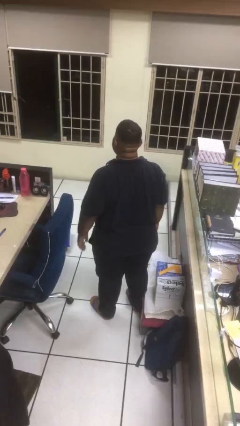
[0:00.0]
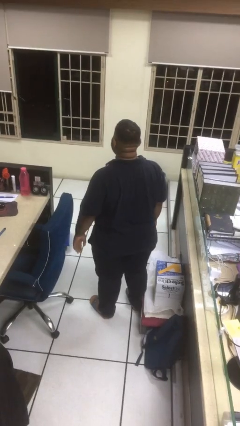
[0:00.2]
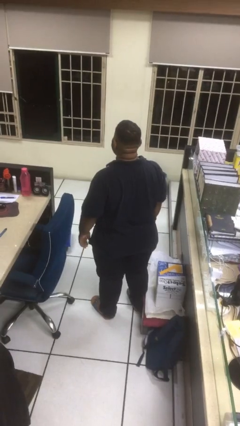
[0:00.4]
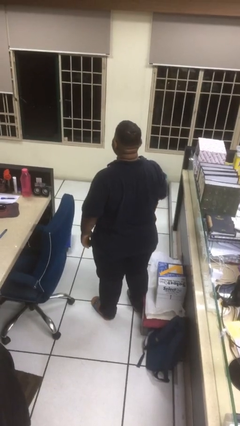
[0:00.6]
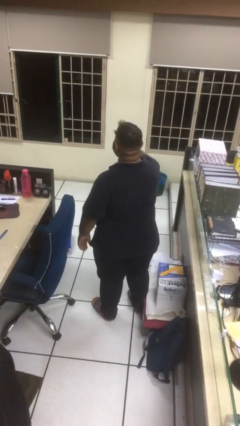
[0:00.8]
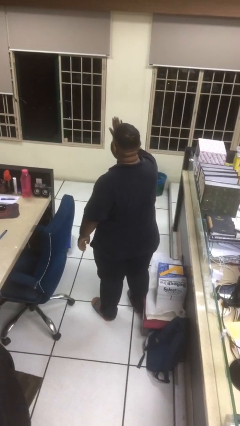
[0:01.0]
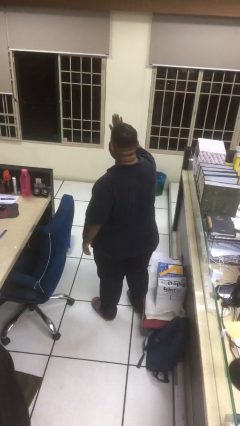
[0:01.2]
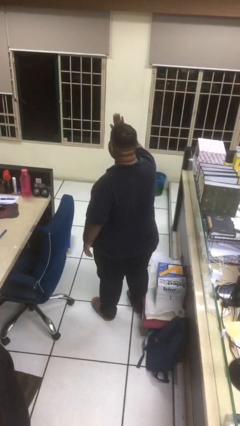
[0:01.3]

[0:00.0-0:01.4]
person gestures stop

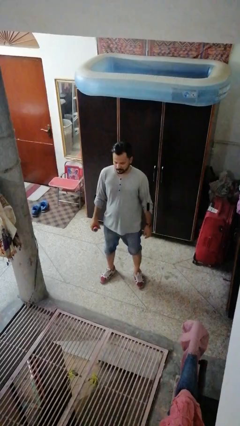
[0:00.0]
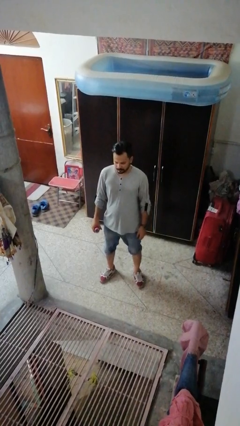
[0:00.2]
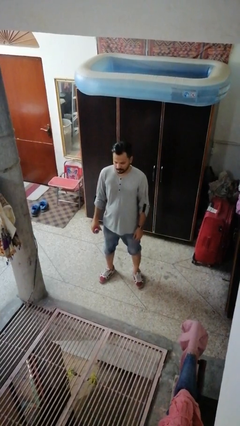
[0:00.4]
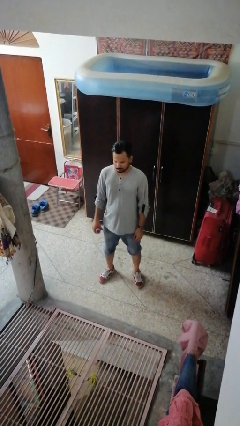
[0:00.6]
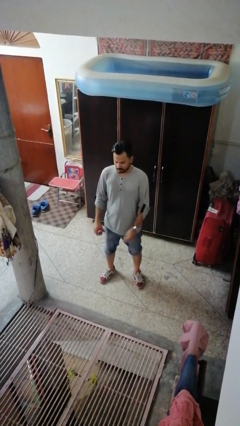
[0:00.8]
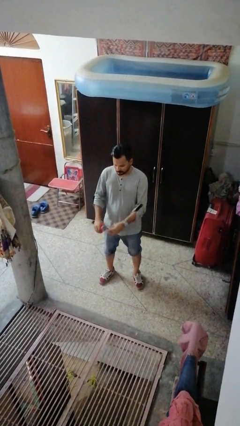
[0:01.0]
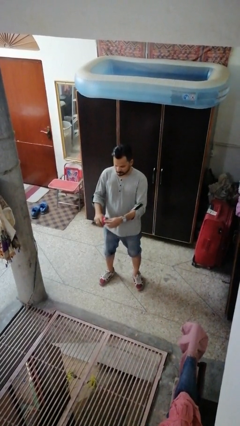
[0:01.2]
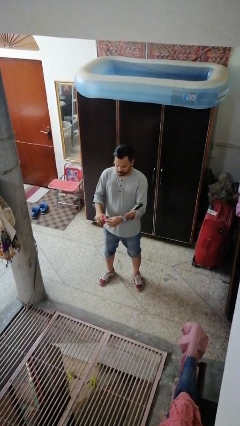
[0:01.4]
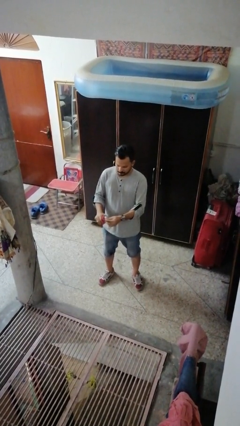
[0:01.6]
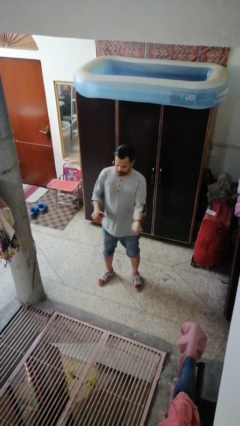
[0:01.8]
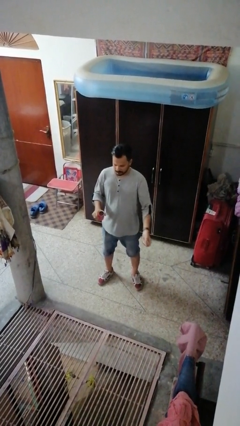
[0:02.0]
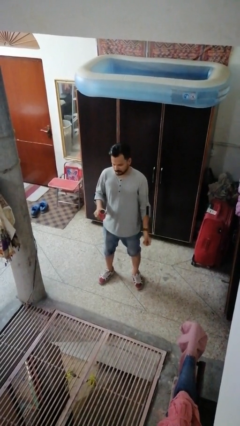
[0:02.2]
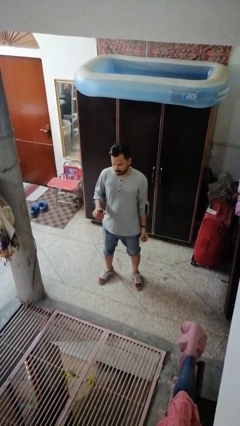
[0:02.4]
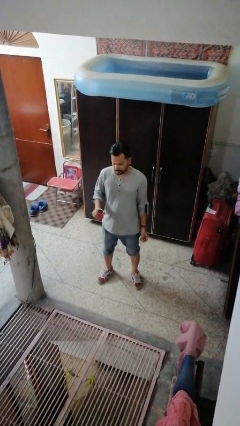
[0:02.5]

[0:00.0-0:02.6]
person opens beverage can

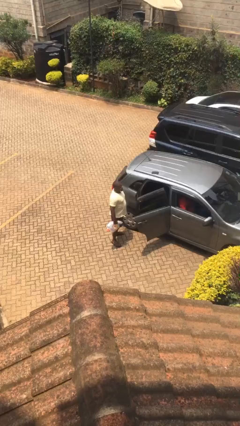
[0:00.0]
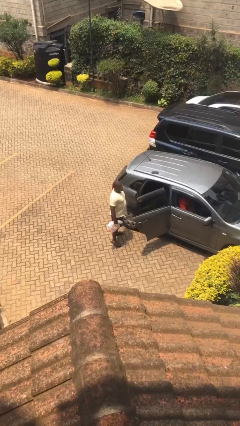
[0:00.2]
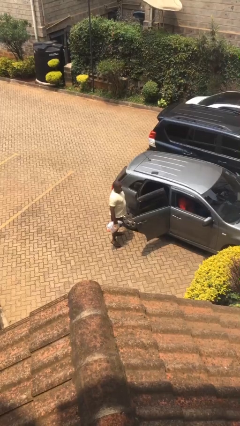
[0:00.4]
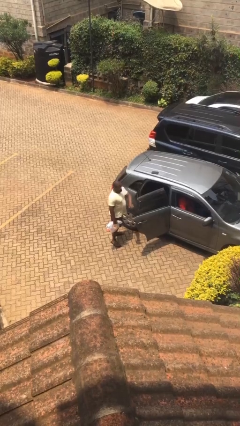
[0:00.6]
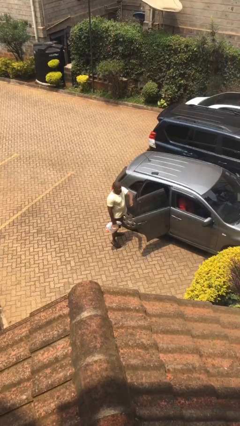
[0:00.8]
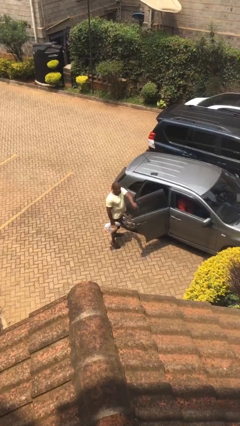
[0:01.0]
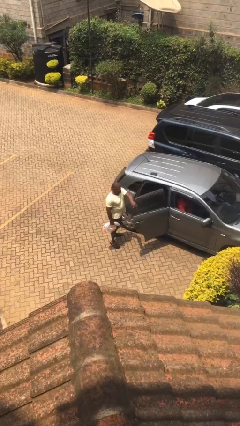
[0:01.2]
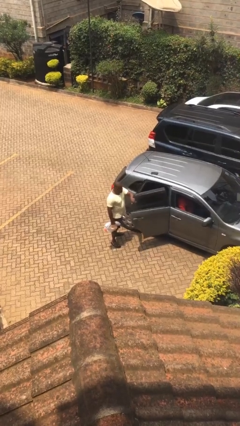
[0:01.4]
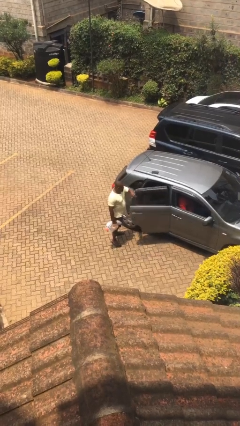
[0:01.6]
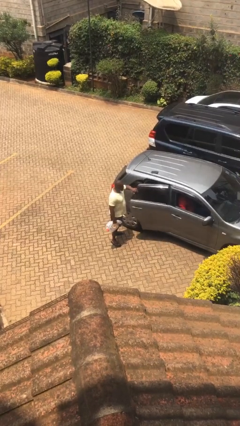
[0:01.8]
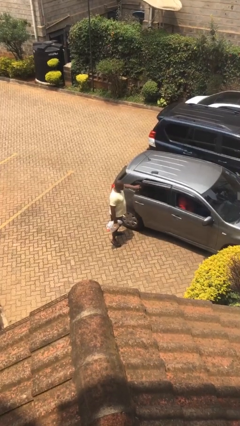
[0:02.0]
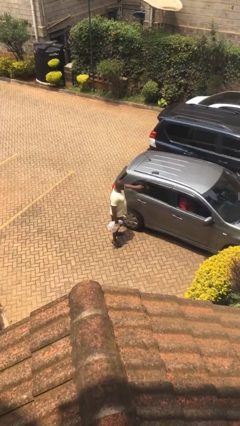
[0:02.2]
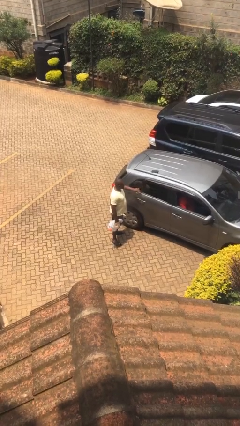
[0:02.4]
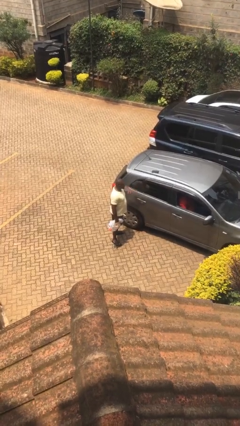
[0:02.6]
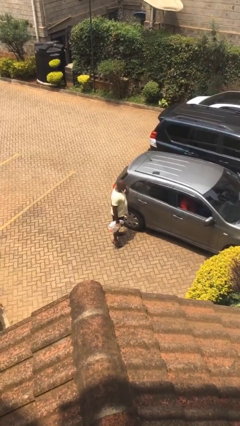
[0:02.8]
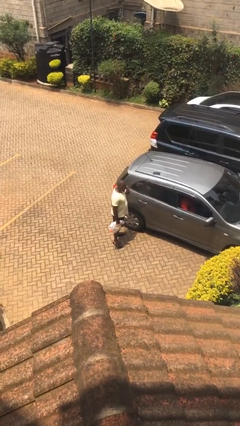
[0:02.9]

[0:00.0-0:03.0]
person closes car door

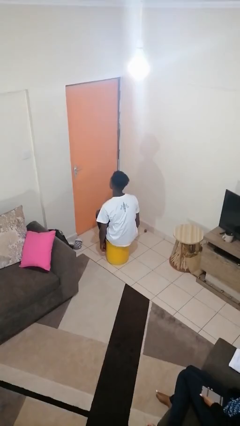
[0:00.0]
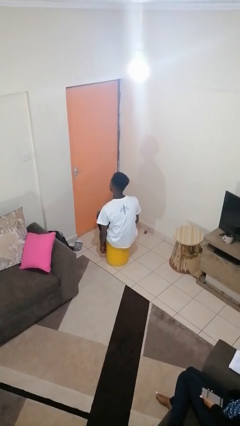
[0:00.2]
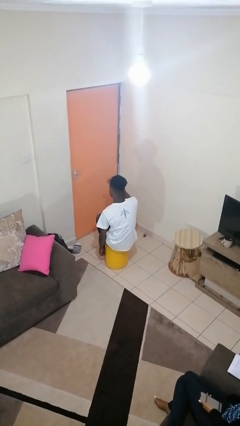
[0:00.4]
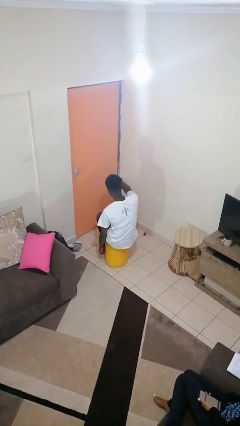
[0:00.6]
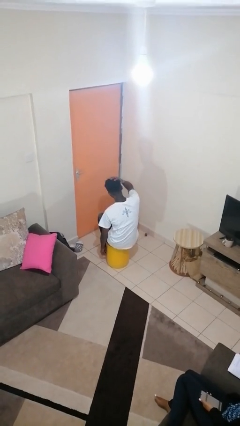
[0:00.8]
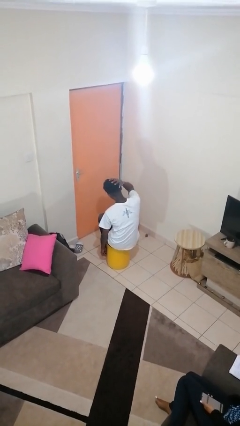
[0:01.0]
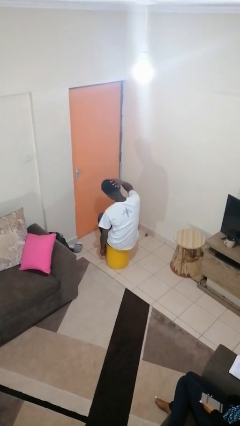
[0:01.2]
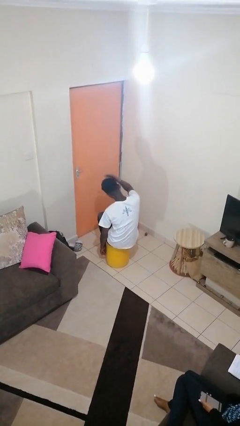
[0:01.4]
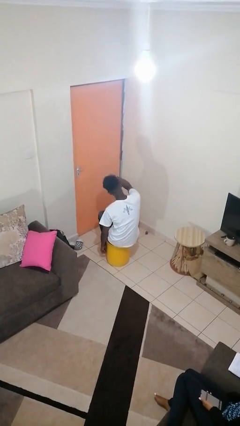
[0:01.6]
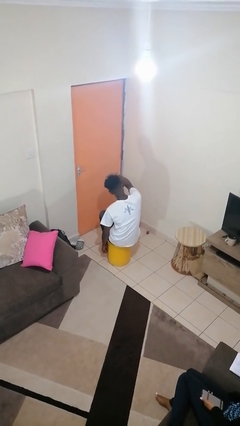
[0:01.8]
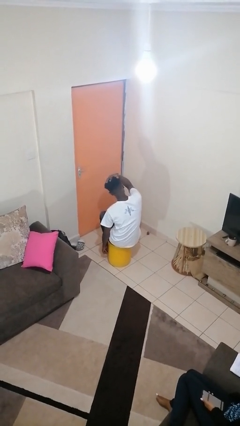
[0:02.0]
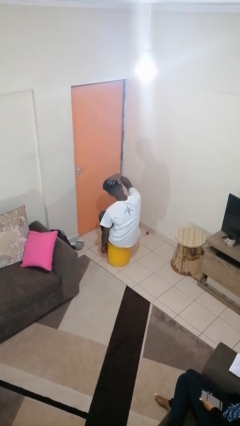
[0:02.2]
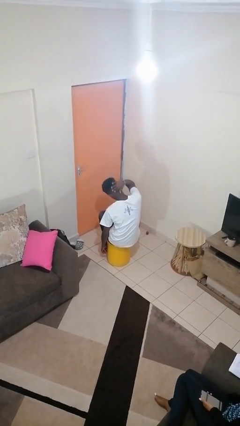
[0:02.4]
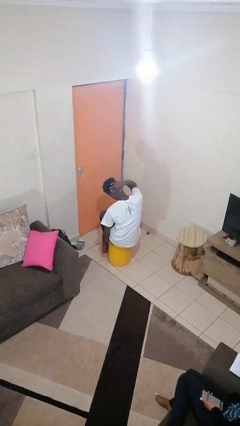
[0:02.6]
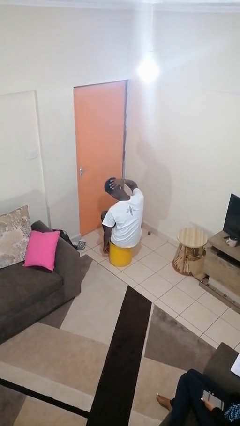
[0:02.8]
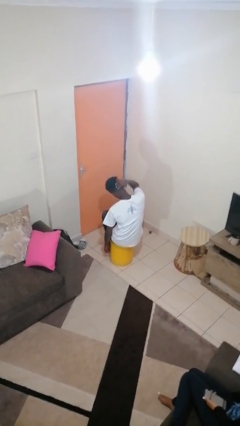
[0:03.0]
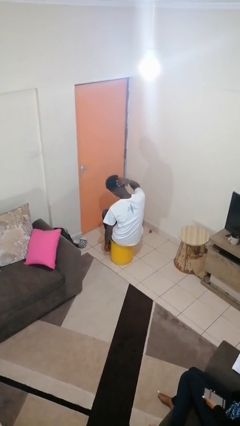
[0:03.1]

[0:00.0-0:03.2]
person strokes hair

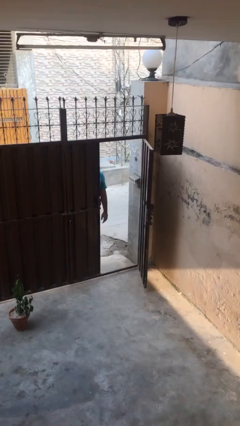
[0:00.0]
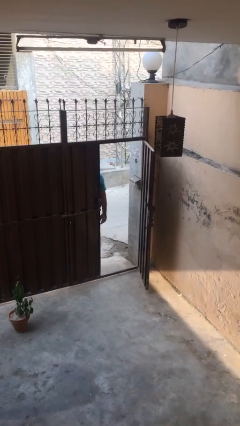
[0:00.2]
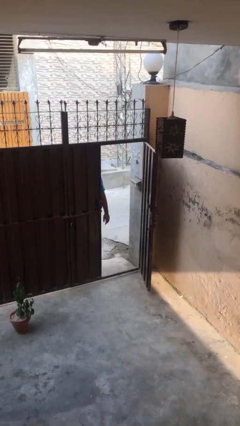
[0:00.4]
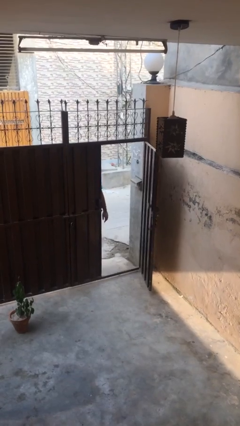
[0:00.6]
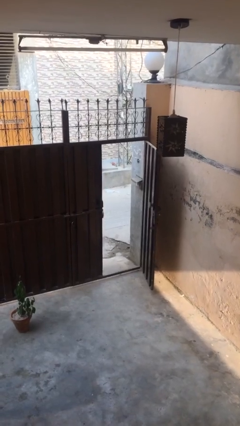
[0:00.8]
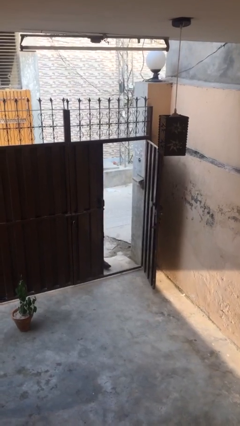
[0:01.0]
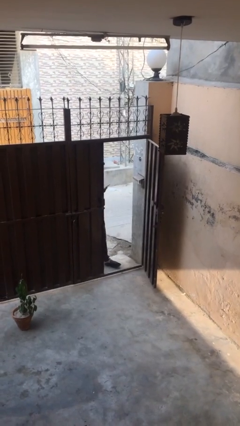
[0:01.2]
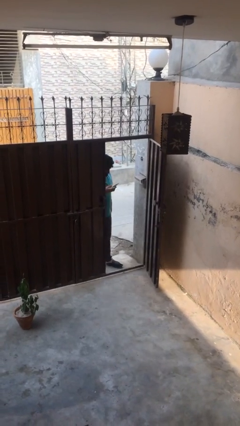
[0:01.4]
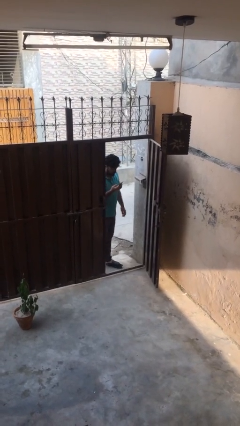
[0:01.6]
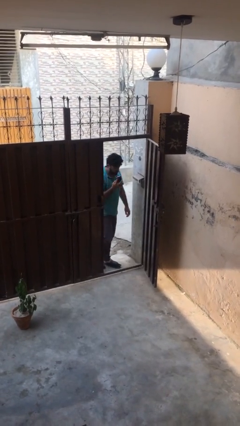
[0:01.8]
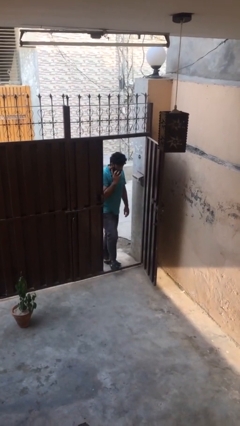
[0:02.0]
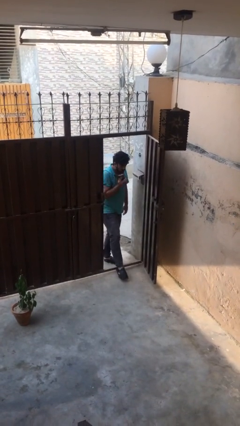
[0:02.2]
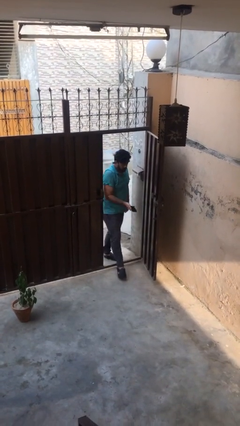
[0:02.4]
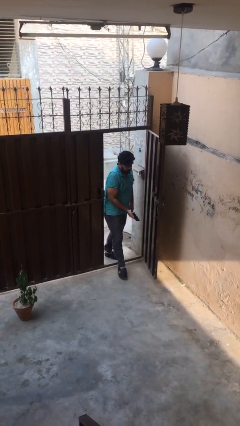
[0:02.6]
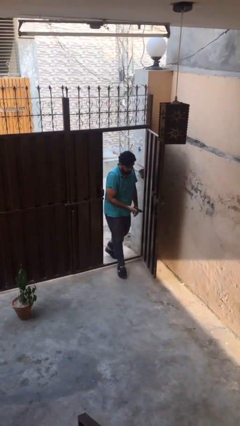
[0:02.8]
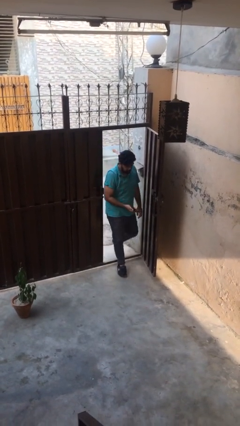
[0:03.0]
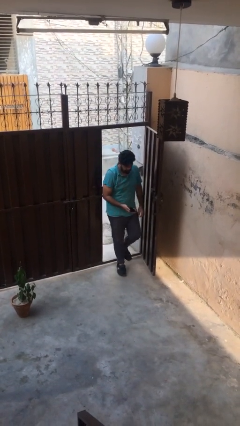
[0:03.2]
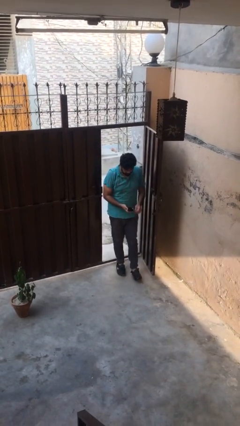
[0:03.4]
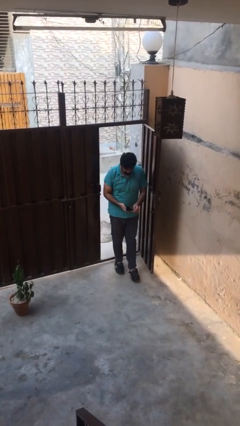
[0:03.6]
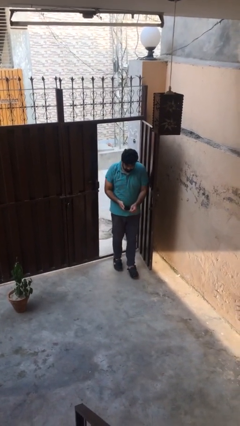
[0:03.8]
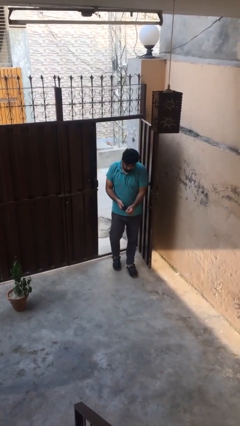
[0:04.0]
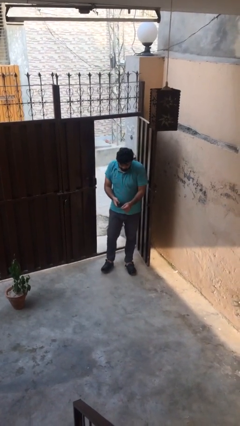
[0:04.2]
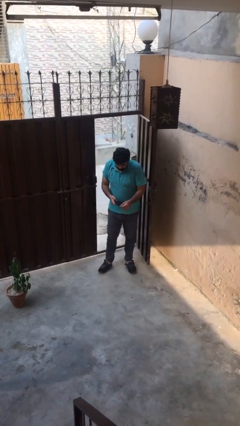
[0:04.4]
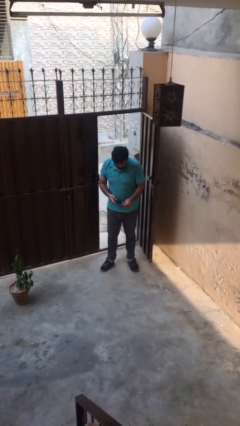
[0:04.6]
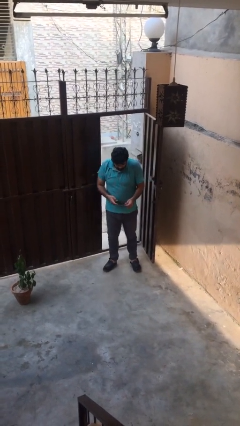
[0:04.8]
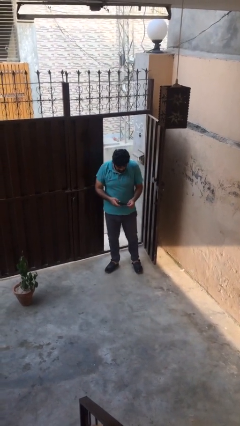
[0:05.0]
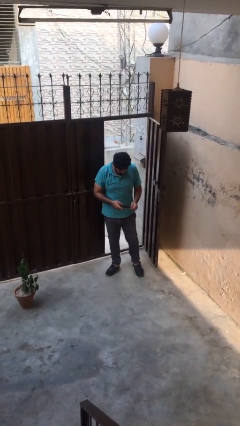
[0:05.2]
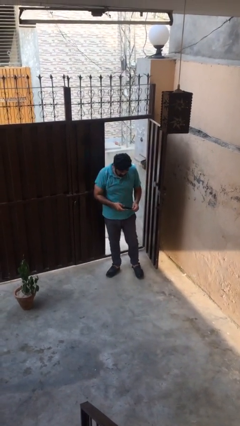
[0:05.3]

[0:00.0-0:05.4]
person enters scene through structure

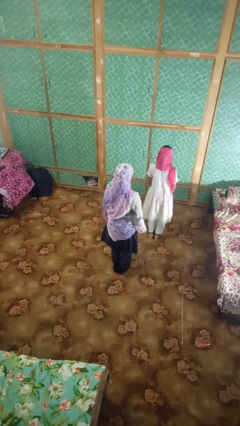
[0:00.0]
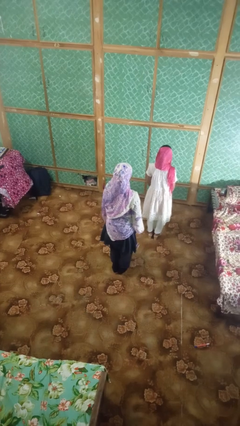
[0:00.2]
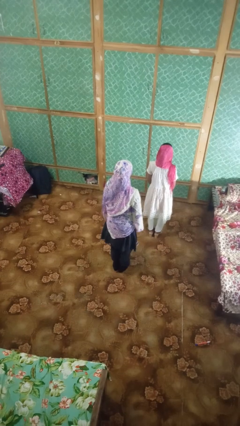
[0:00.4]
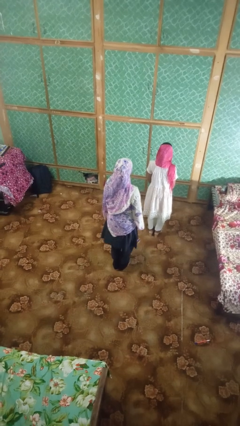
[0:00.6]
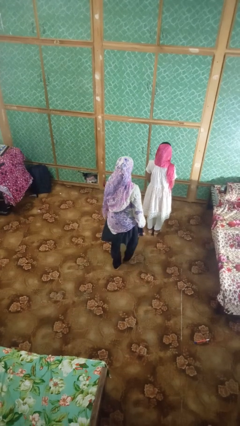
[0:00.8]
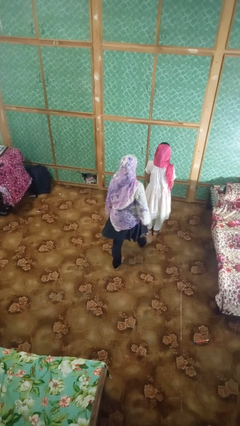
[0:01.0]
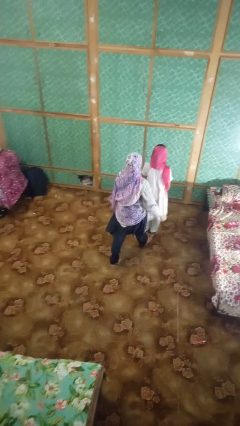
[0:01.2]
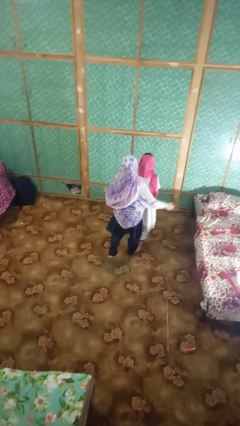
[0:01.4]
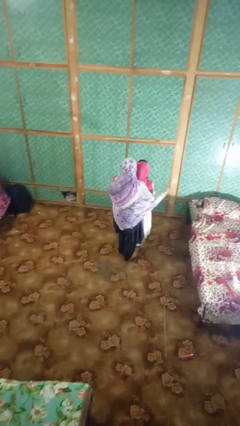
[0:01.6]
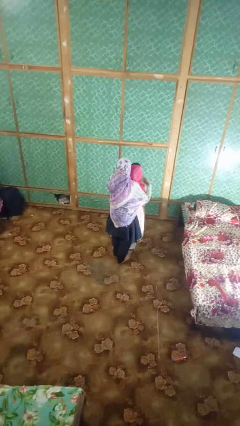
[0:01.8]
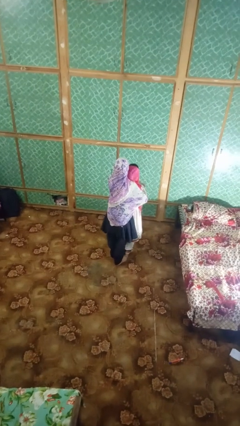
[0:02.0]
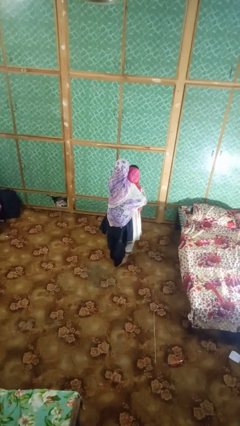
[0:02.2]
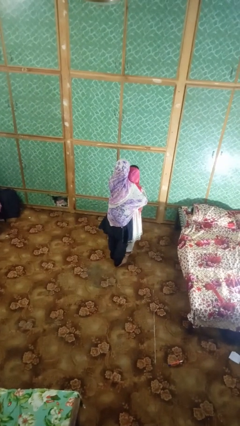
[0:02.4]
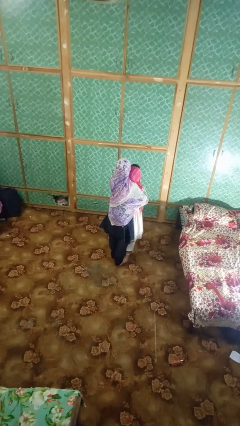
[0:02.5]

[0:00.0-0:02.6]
person hugs person from behind
